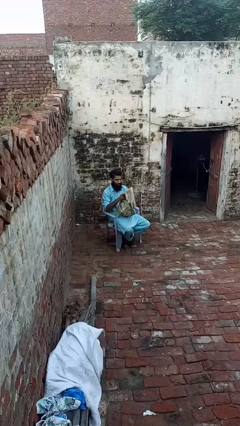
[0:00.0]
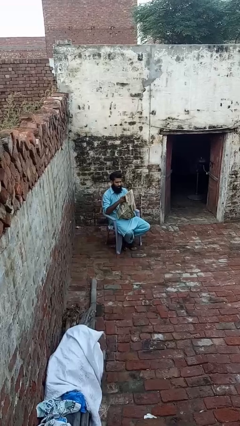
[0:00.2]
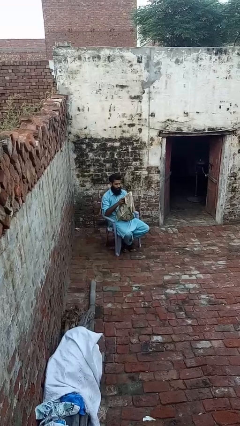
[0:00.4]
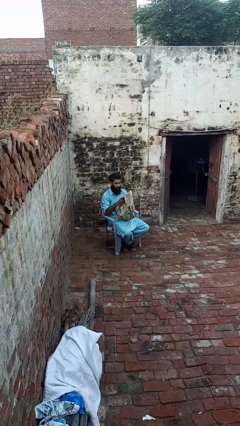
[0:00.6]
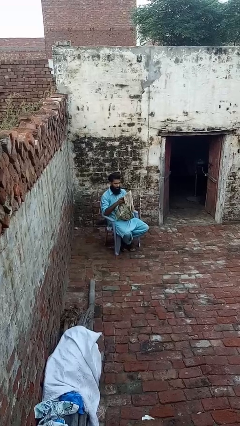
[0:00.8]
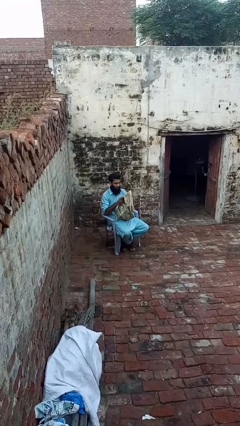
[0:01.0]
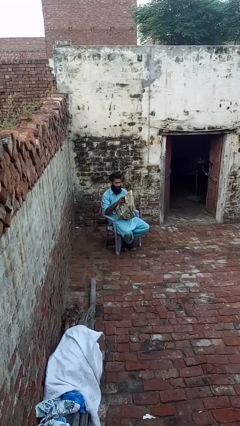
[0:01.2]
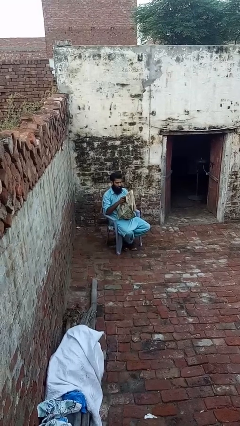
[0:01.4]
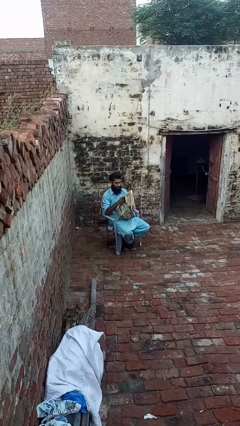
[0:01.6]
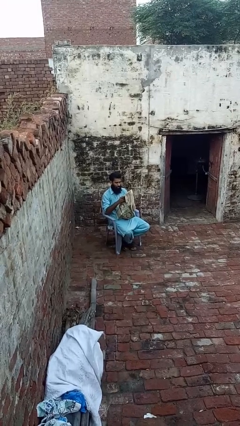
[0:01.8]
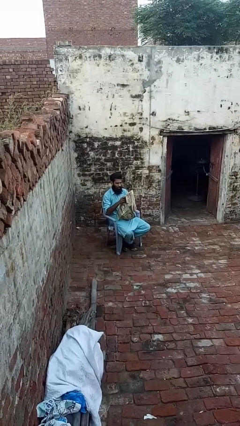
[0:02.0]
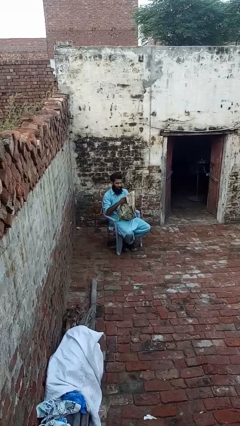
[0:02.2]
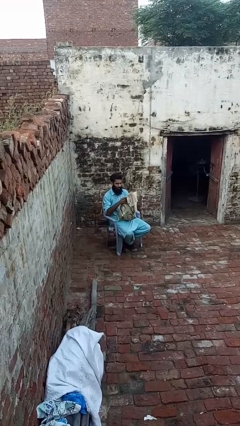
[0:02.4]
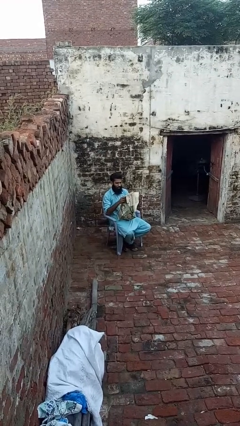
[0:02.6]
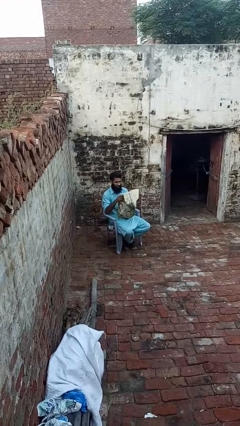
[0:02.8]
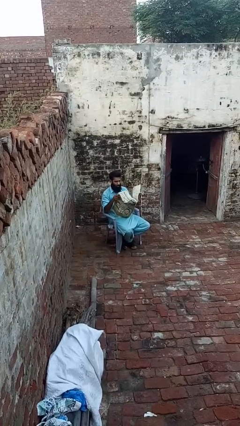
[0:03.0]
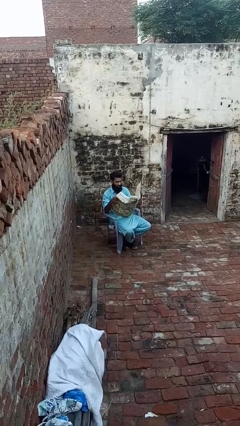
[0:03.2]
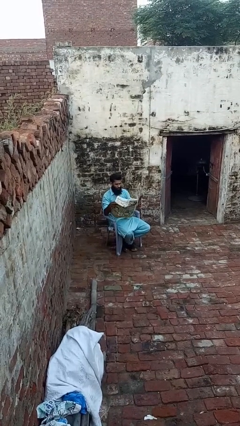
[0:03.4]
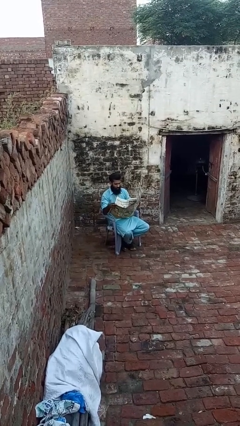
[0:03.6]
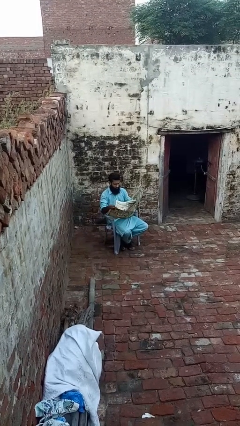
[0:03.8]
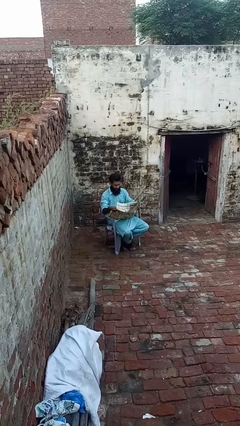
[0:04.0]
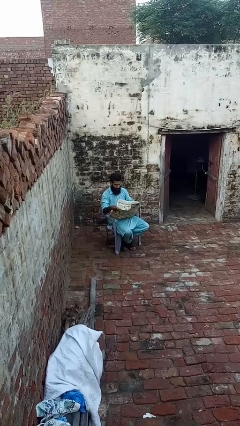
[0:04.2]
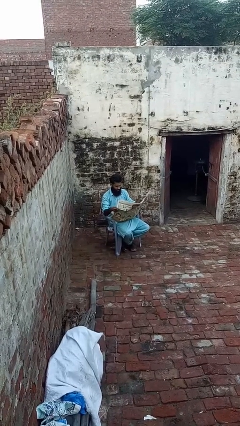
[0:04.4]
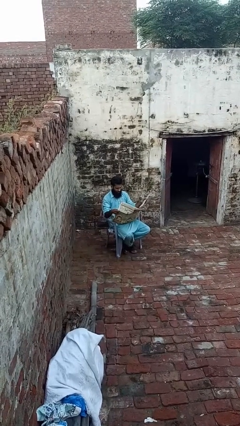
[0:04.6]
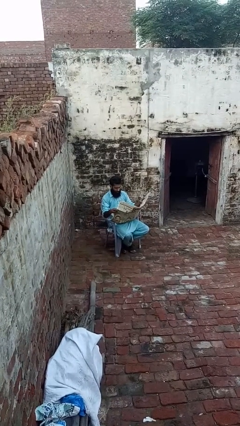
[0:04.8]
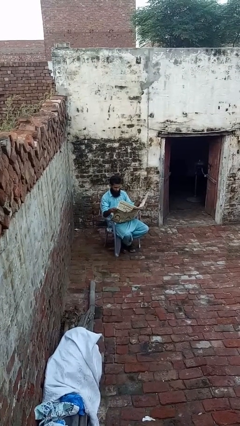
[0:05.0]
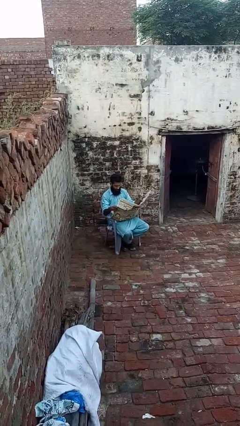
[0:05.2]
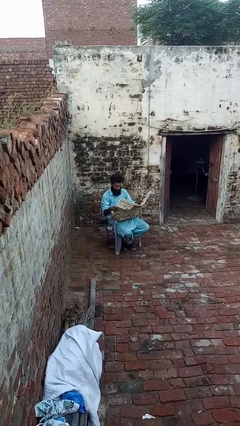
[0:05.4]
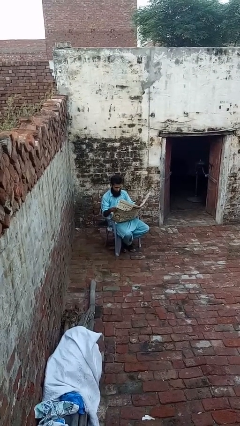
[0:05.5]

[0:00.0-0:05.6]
person reads newspaper

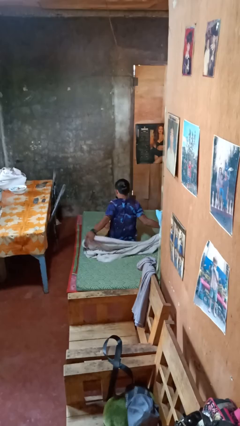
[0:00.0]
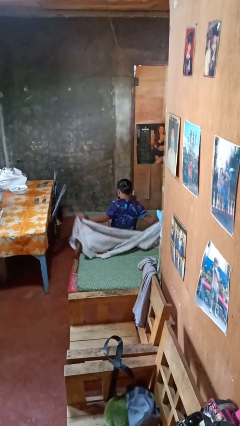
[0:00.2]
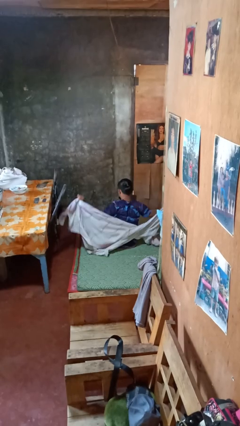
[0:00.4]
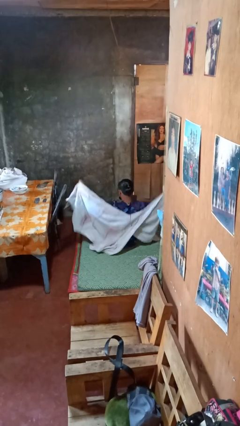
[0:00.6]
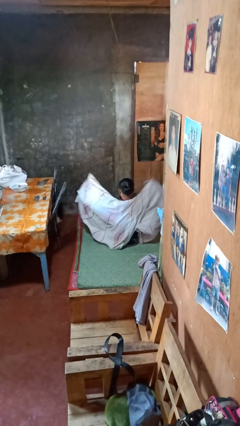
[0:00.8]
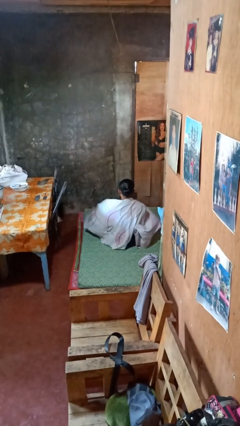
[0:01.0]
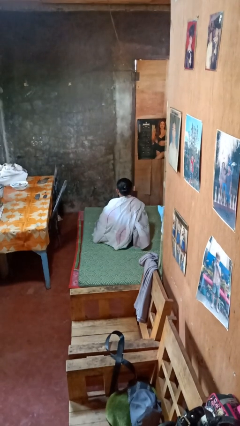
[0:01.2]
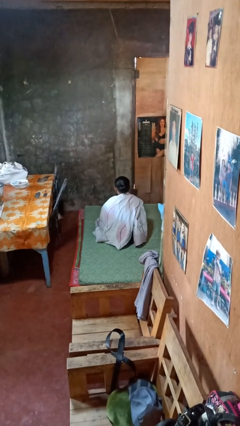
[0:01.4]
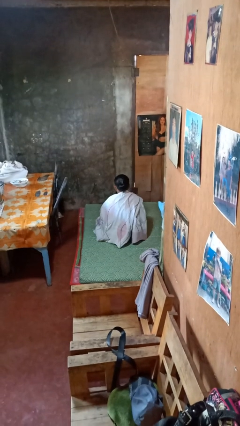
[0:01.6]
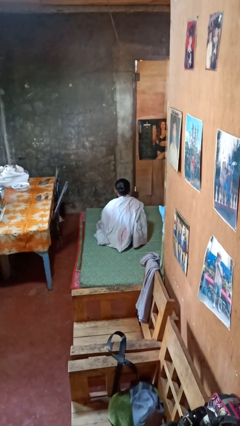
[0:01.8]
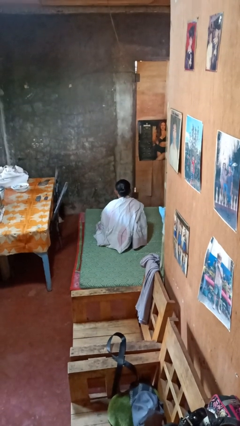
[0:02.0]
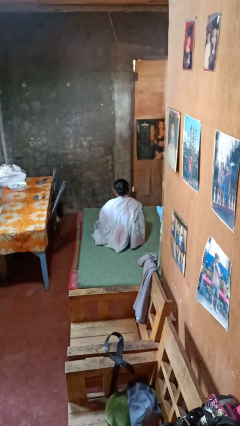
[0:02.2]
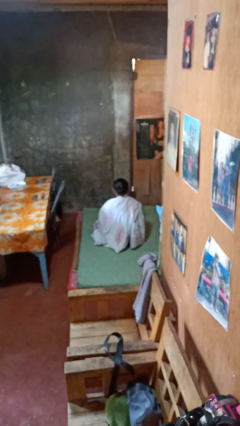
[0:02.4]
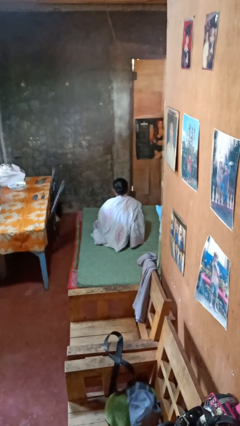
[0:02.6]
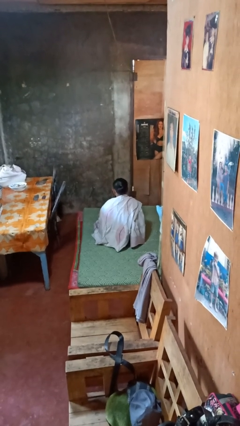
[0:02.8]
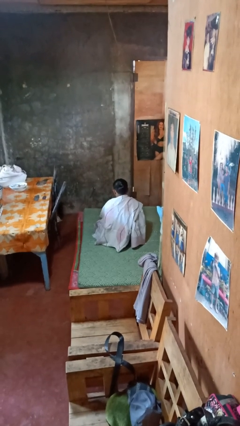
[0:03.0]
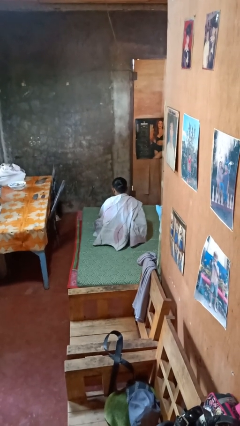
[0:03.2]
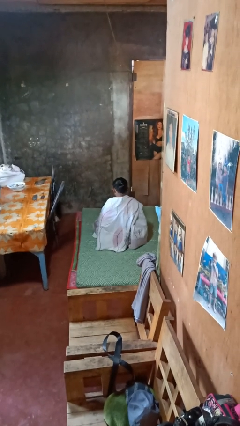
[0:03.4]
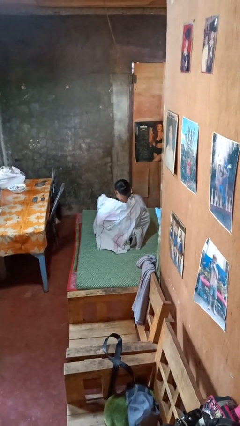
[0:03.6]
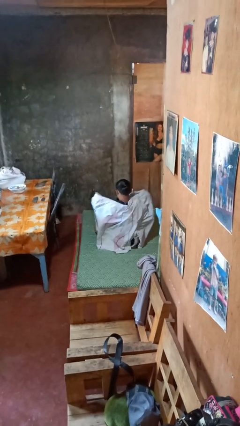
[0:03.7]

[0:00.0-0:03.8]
person covers with blanket

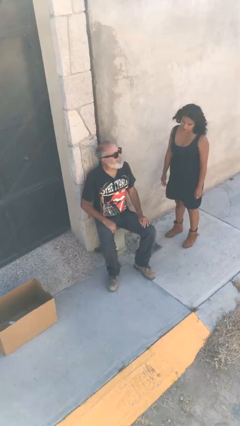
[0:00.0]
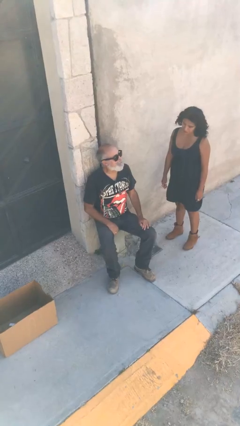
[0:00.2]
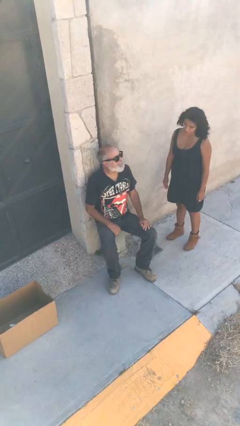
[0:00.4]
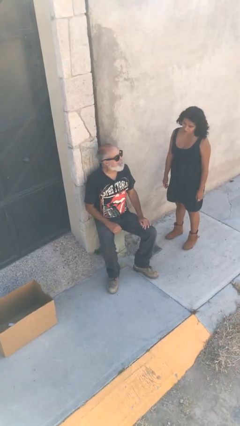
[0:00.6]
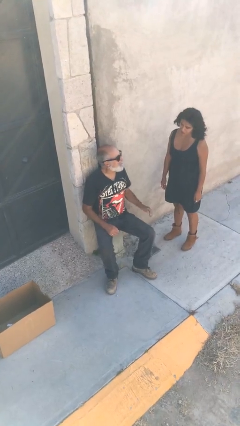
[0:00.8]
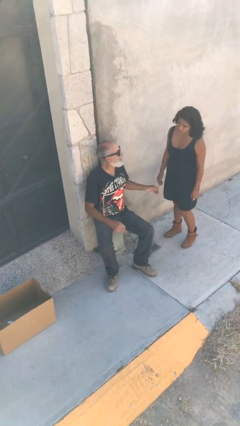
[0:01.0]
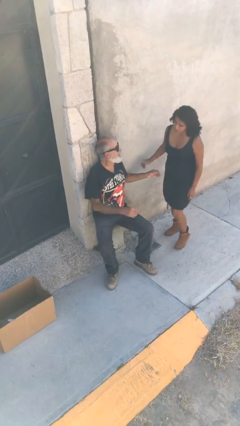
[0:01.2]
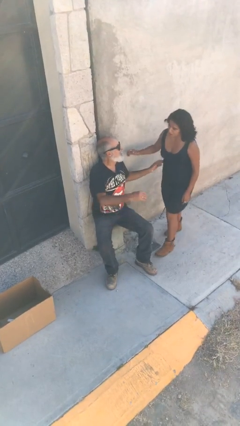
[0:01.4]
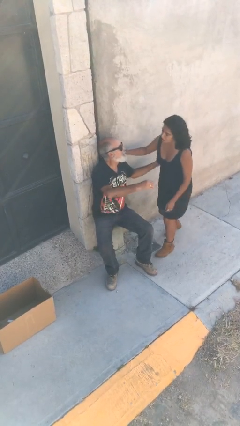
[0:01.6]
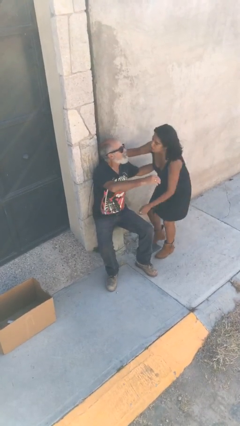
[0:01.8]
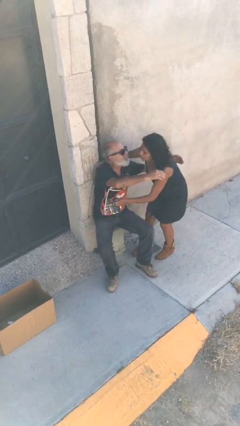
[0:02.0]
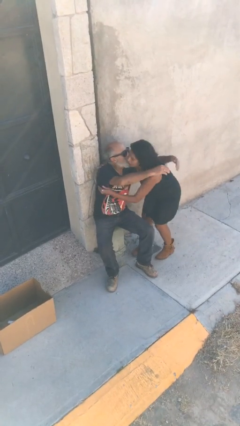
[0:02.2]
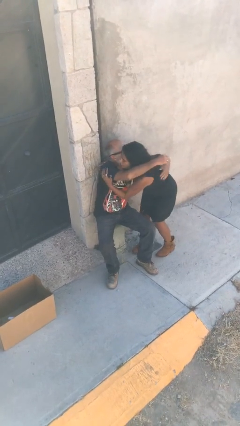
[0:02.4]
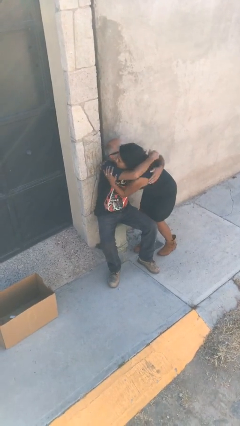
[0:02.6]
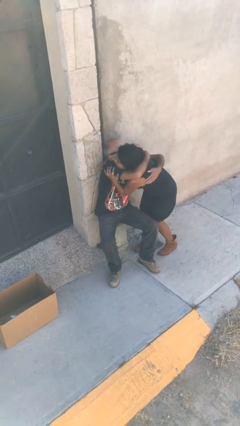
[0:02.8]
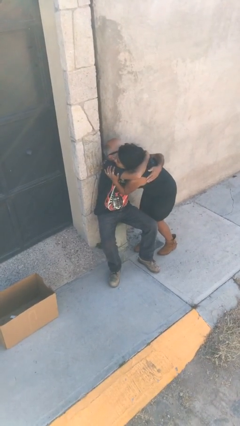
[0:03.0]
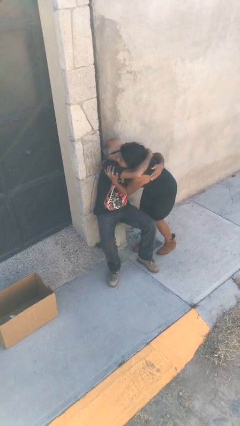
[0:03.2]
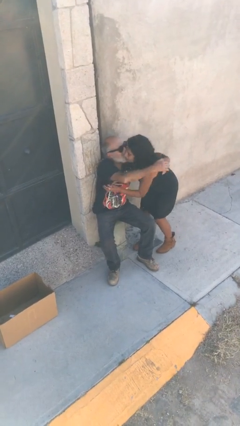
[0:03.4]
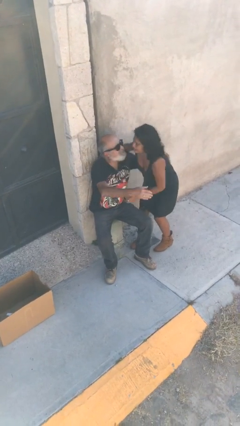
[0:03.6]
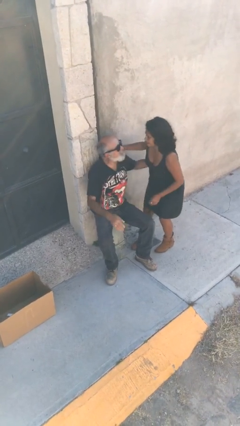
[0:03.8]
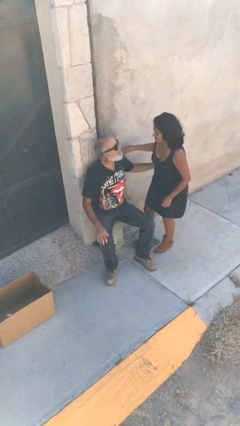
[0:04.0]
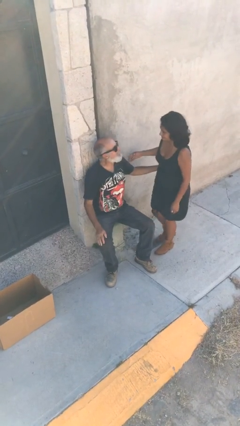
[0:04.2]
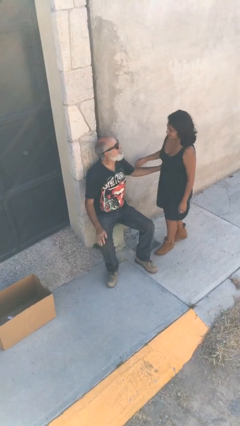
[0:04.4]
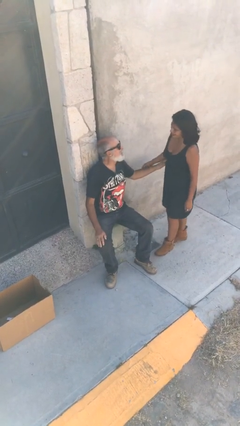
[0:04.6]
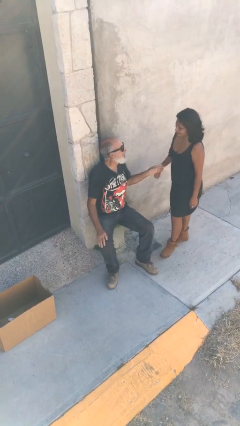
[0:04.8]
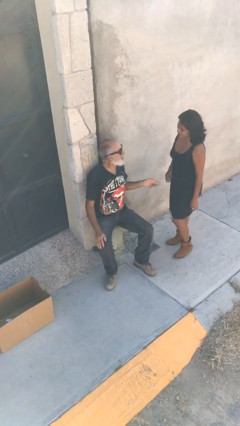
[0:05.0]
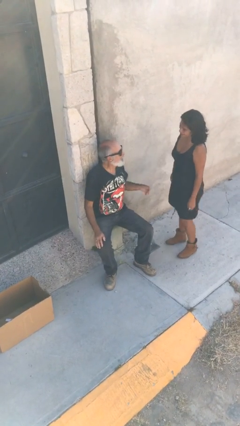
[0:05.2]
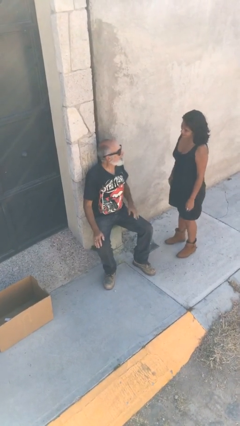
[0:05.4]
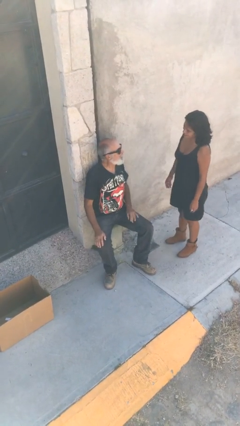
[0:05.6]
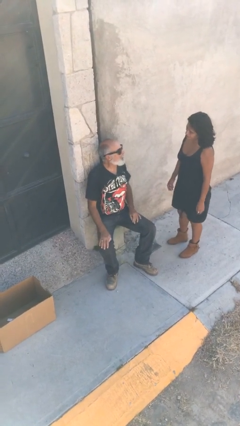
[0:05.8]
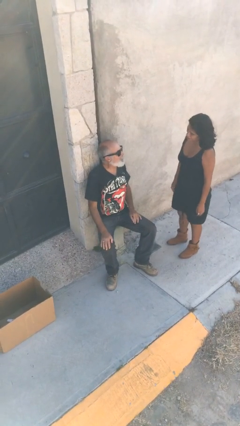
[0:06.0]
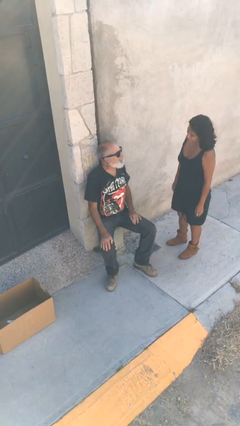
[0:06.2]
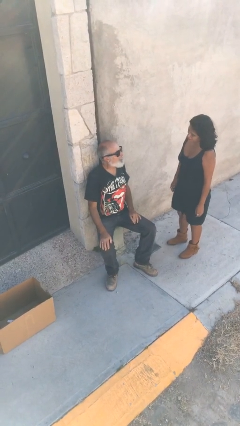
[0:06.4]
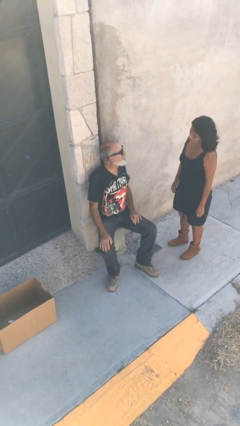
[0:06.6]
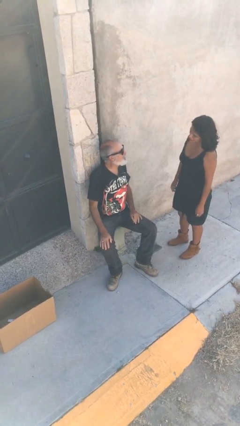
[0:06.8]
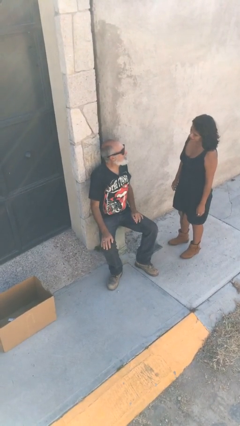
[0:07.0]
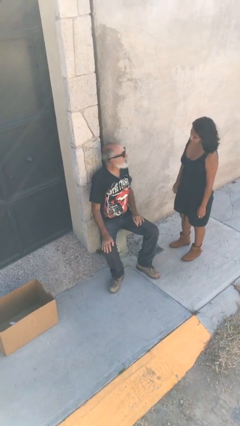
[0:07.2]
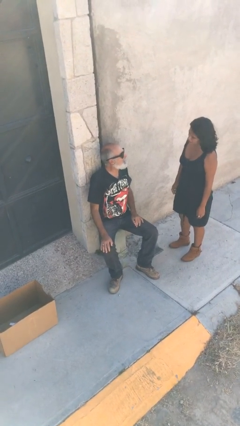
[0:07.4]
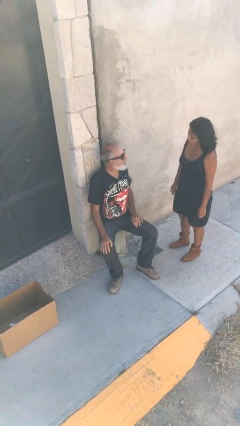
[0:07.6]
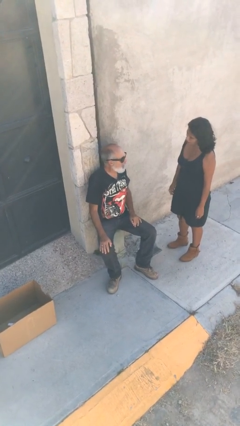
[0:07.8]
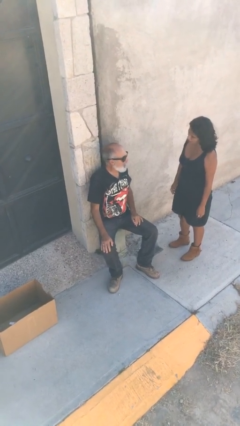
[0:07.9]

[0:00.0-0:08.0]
person embraces person
